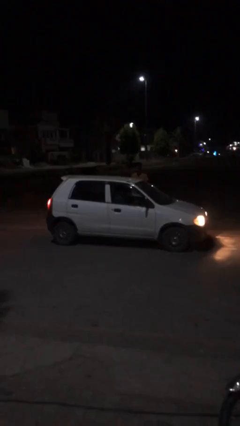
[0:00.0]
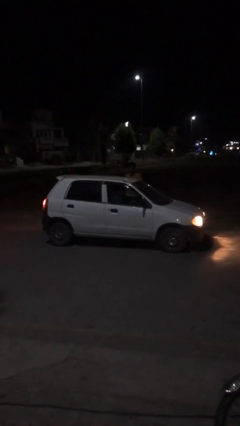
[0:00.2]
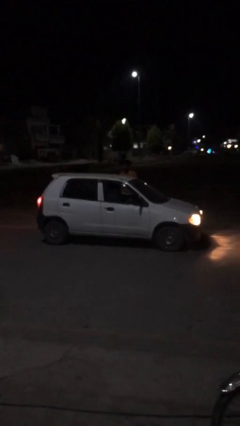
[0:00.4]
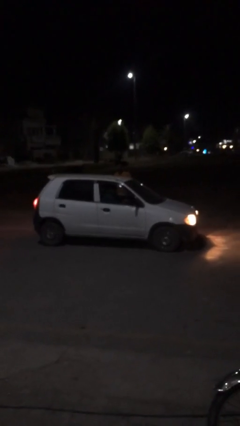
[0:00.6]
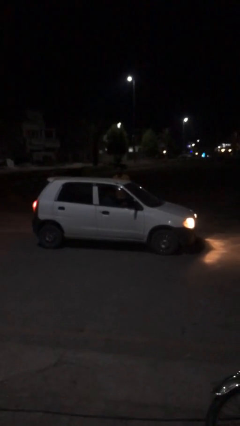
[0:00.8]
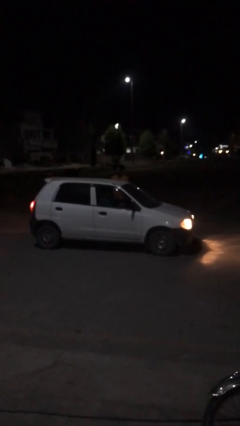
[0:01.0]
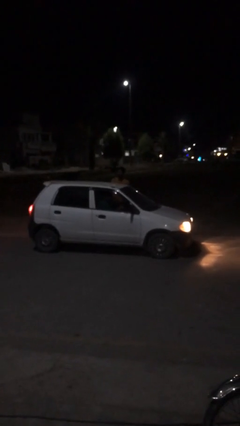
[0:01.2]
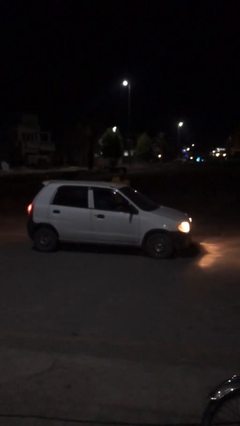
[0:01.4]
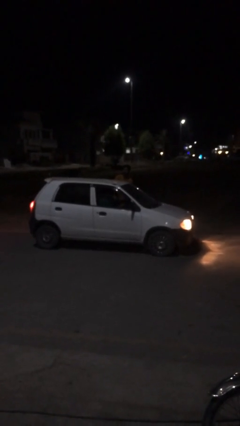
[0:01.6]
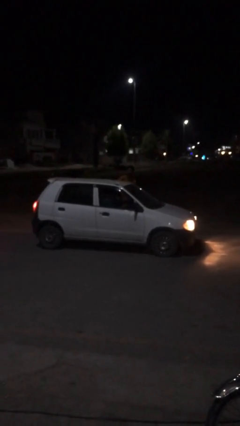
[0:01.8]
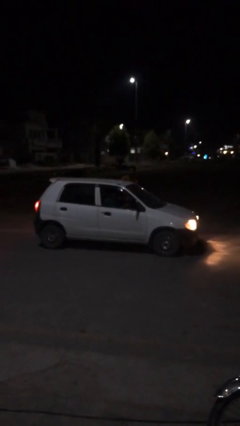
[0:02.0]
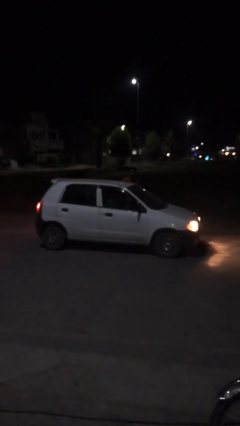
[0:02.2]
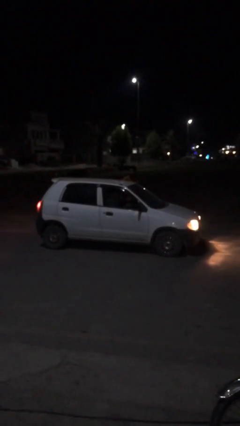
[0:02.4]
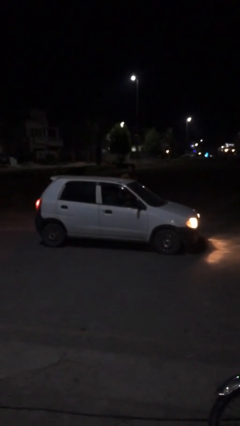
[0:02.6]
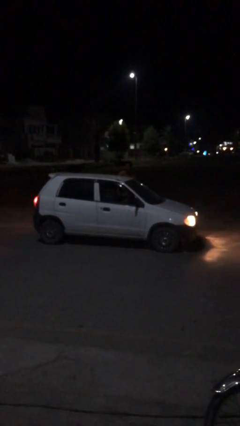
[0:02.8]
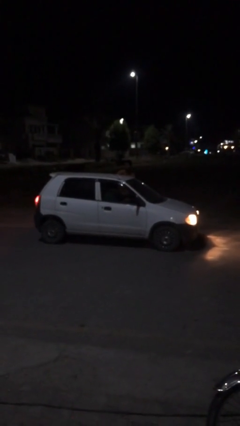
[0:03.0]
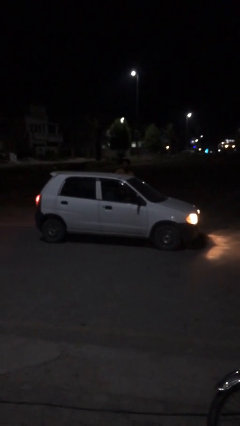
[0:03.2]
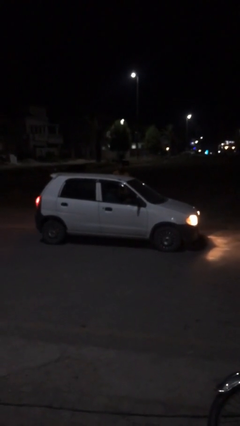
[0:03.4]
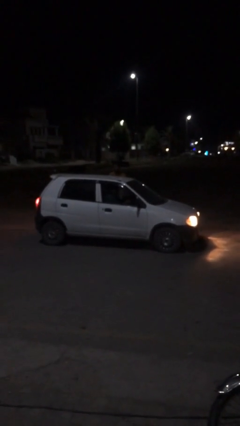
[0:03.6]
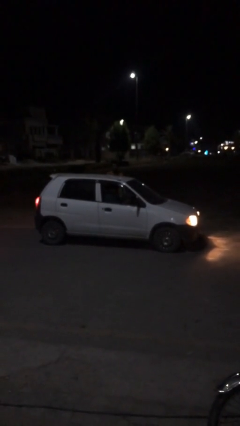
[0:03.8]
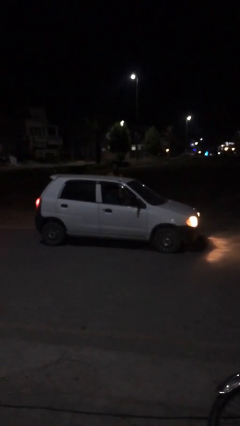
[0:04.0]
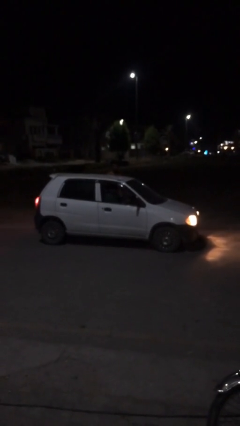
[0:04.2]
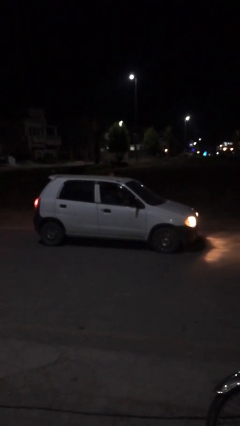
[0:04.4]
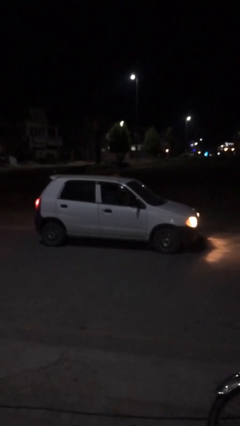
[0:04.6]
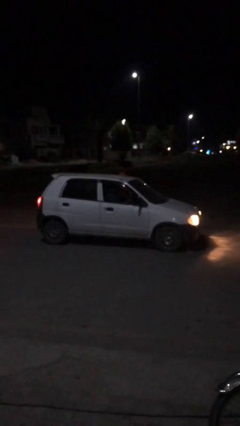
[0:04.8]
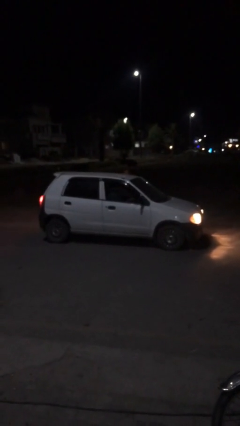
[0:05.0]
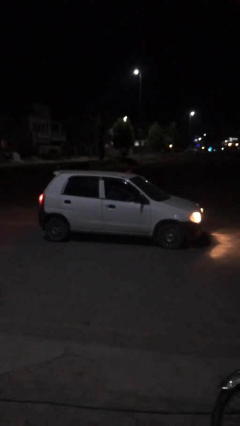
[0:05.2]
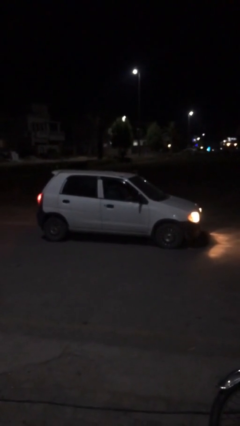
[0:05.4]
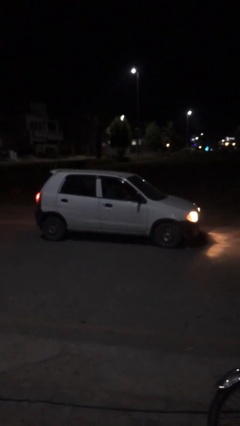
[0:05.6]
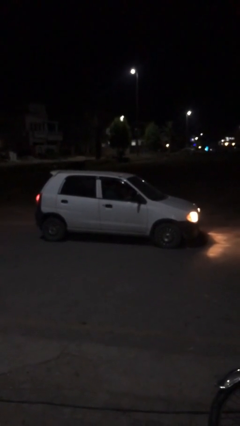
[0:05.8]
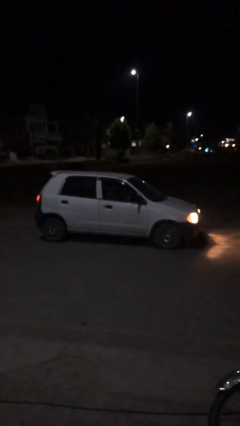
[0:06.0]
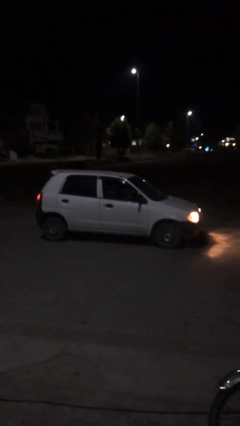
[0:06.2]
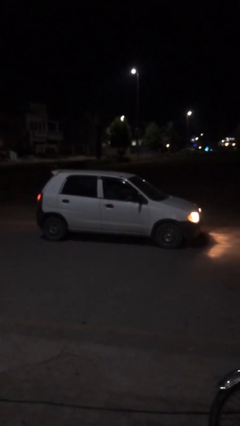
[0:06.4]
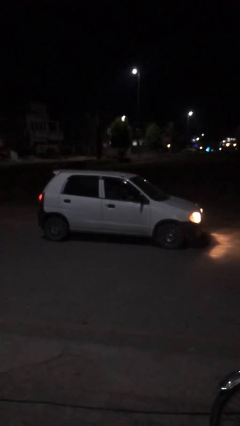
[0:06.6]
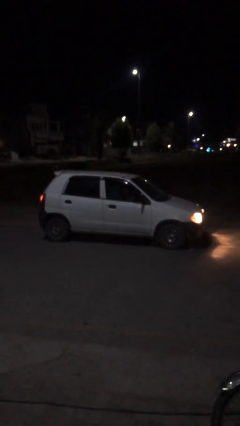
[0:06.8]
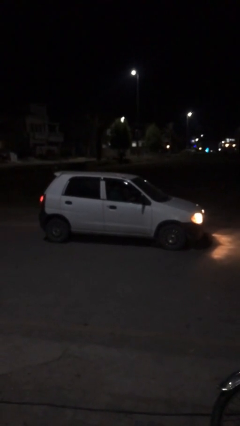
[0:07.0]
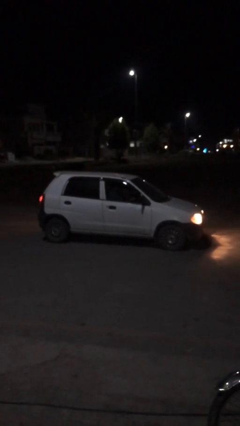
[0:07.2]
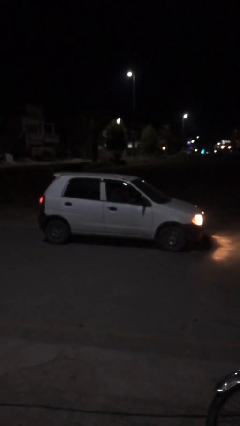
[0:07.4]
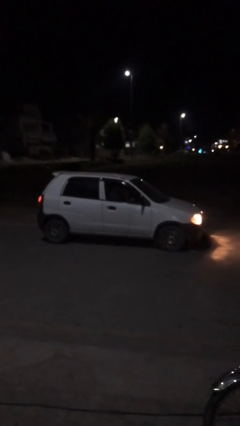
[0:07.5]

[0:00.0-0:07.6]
car picks up person

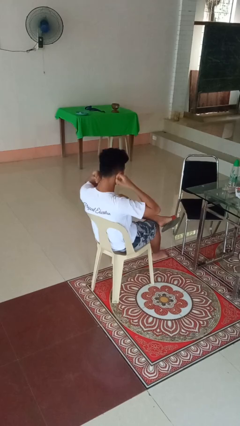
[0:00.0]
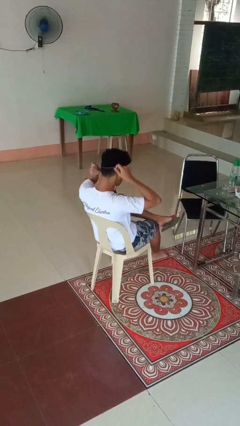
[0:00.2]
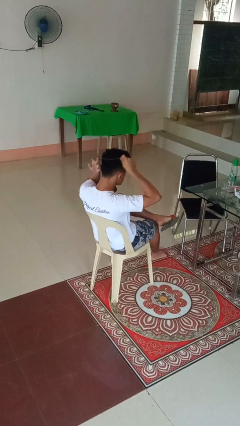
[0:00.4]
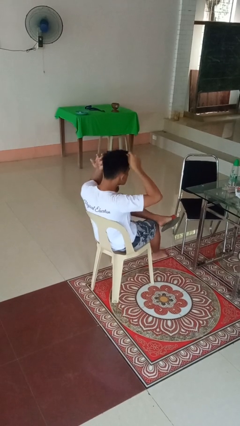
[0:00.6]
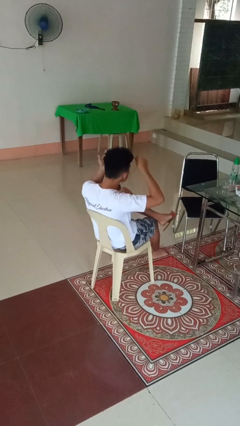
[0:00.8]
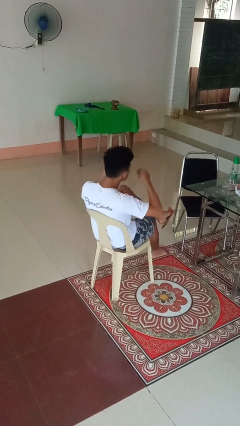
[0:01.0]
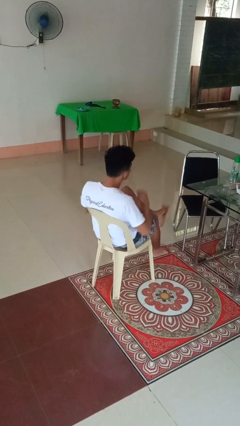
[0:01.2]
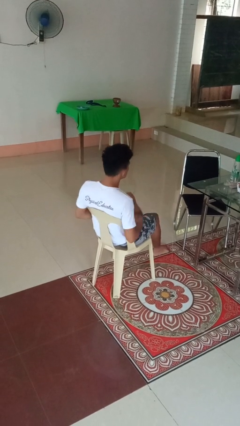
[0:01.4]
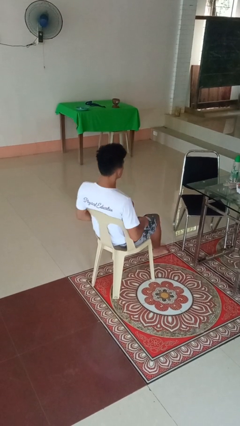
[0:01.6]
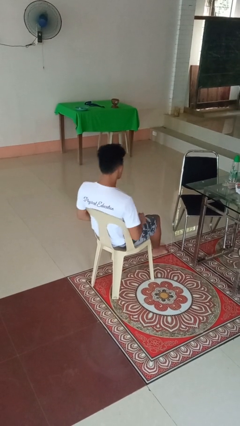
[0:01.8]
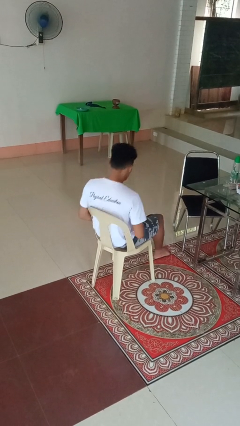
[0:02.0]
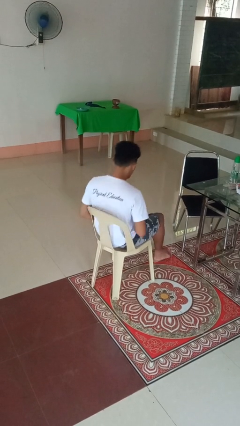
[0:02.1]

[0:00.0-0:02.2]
person takes off necklace

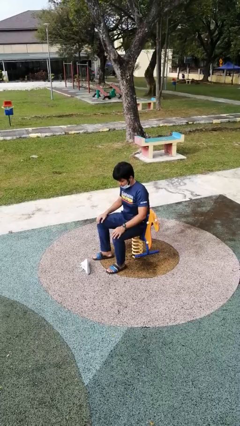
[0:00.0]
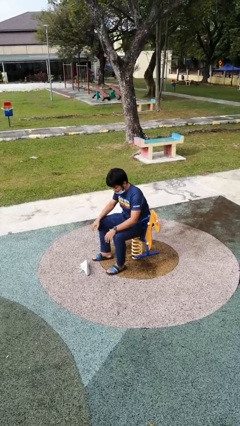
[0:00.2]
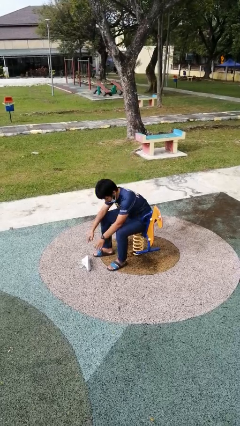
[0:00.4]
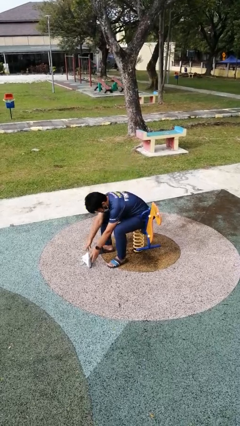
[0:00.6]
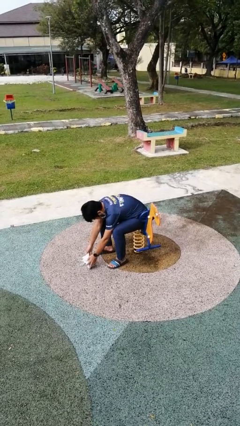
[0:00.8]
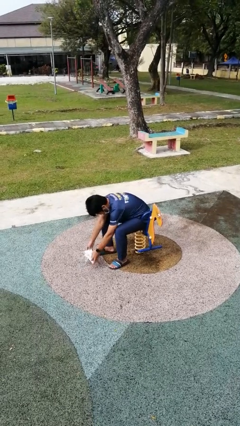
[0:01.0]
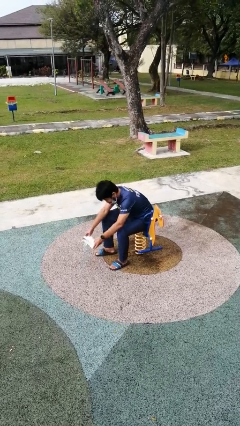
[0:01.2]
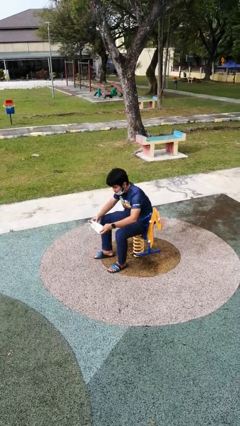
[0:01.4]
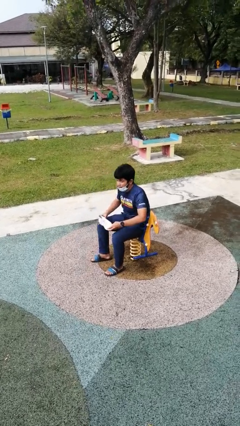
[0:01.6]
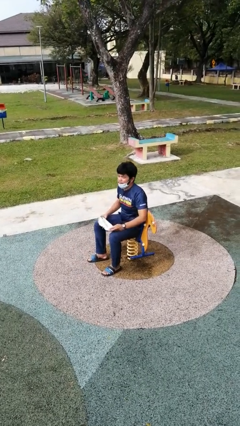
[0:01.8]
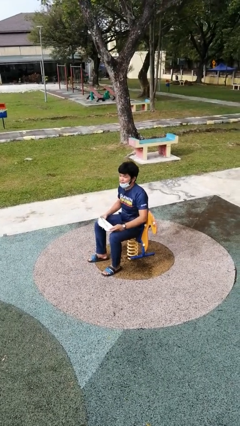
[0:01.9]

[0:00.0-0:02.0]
person picks up object from floor

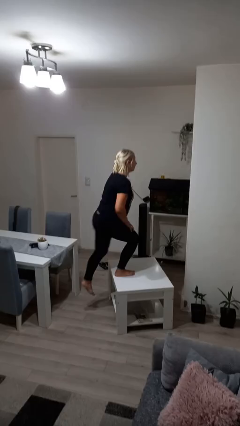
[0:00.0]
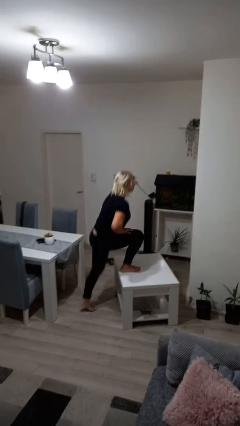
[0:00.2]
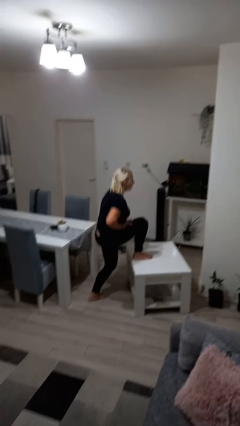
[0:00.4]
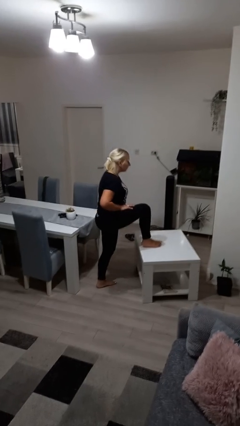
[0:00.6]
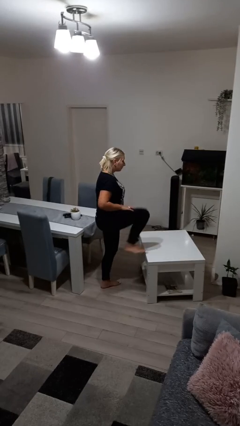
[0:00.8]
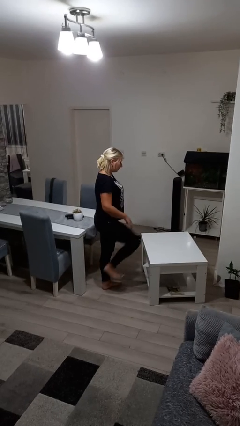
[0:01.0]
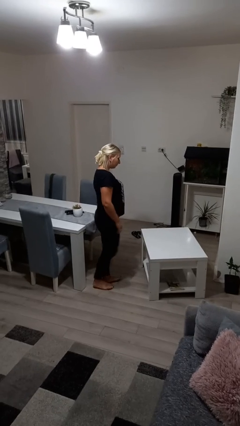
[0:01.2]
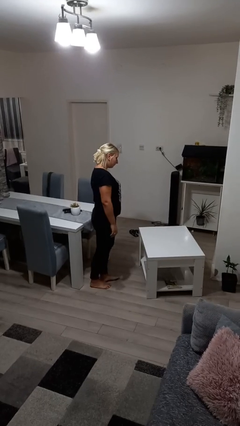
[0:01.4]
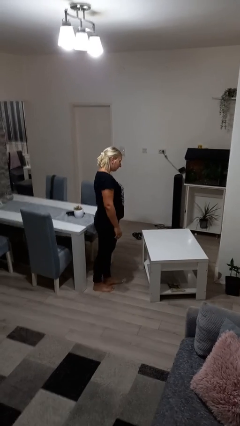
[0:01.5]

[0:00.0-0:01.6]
person climbs off table

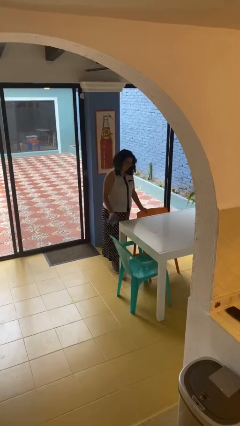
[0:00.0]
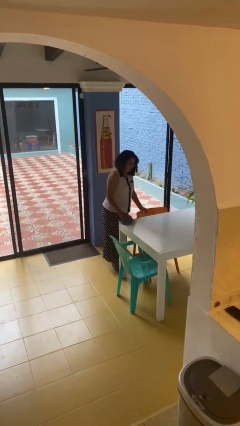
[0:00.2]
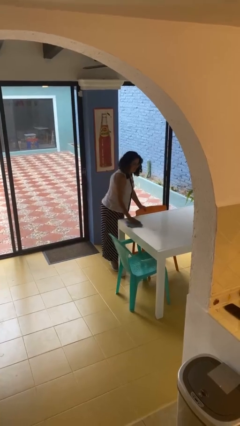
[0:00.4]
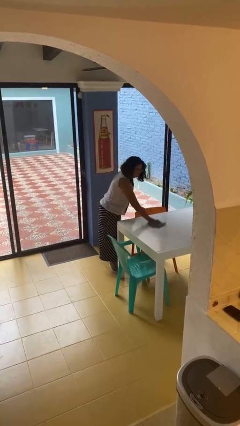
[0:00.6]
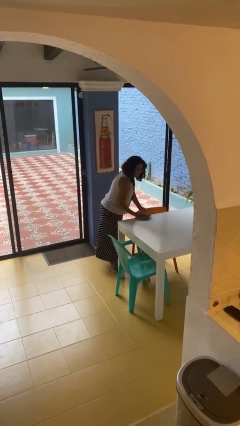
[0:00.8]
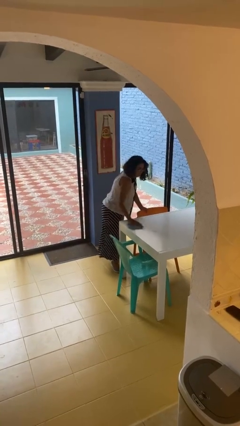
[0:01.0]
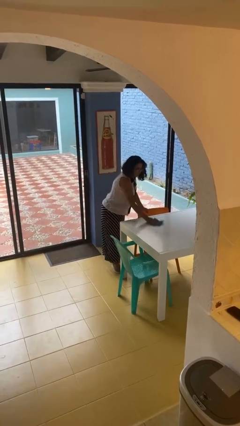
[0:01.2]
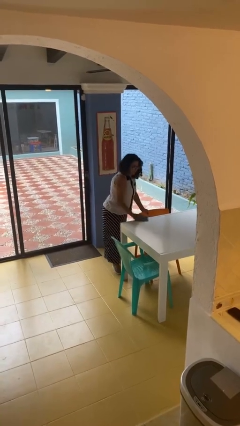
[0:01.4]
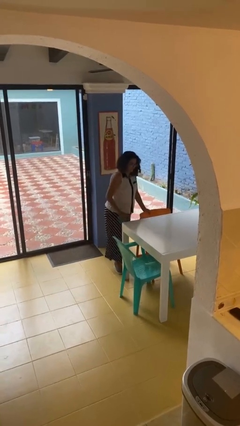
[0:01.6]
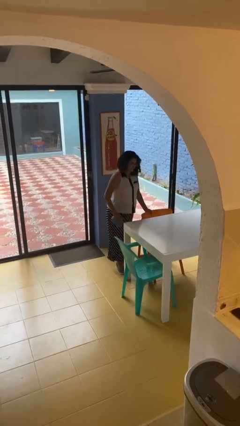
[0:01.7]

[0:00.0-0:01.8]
person cleans table with rag

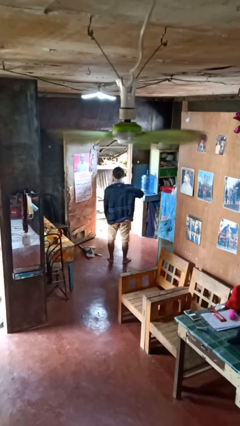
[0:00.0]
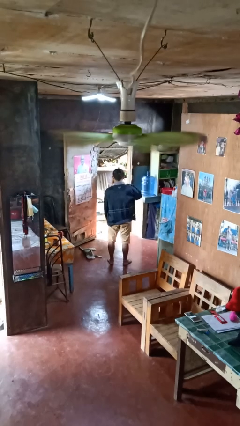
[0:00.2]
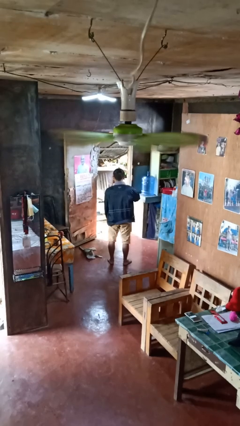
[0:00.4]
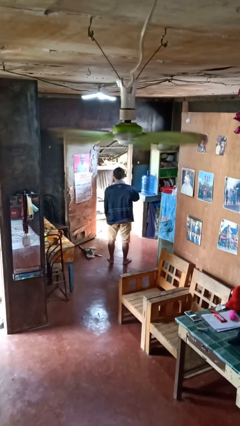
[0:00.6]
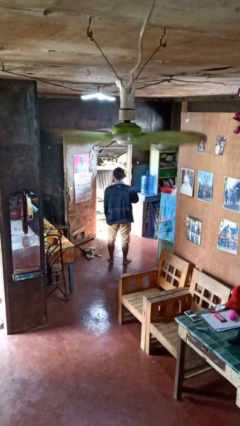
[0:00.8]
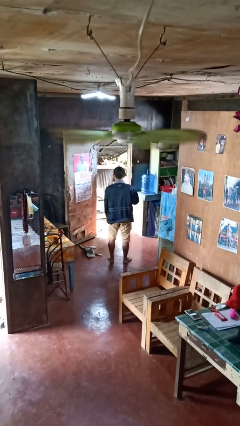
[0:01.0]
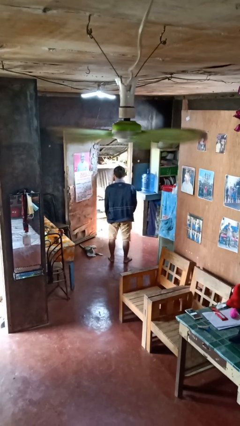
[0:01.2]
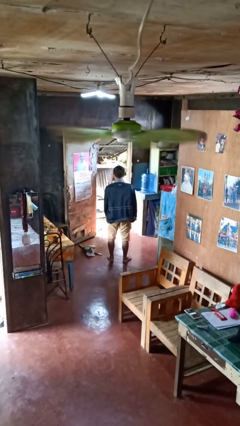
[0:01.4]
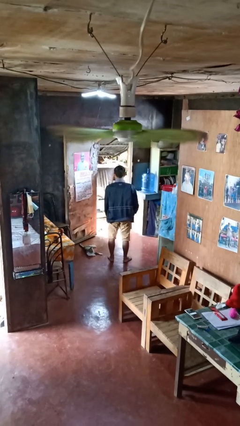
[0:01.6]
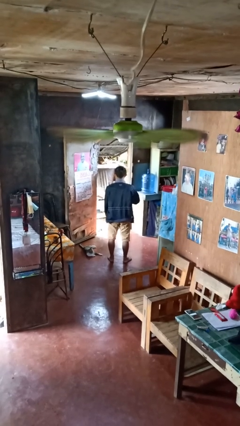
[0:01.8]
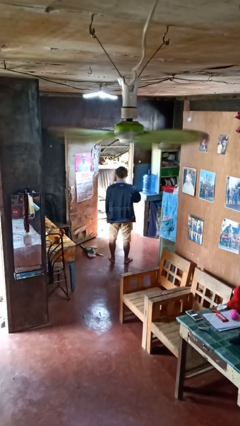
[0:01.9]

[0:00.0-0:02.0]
person zips up jacket
